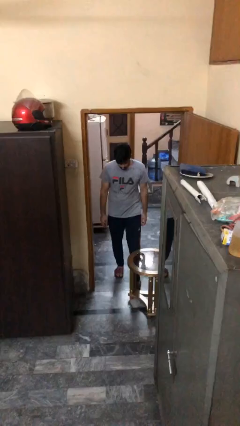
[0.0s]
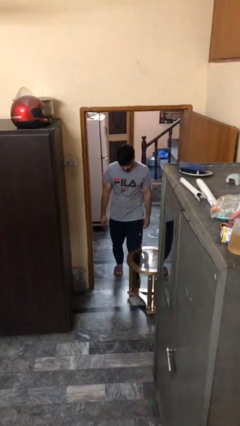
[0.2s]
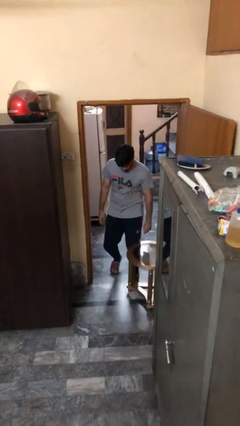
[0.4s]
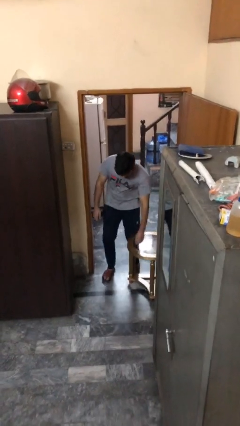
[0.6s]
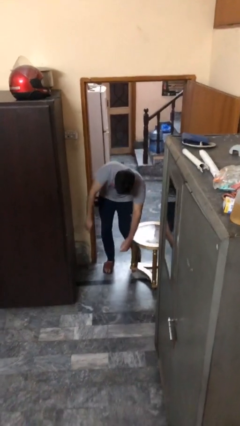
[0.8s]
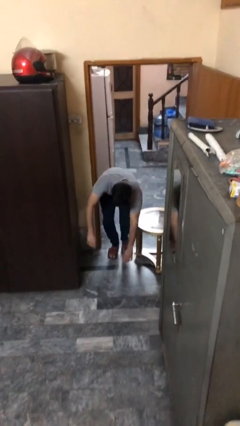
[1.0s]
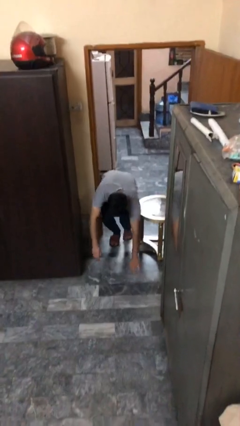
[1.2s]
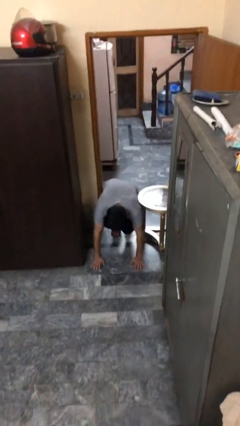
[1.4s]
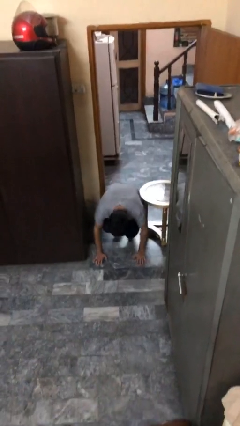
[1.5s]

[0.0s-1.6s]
person trips on object on floor

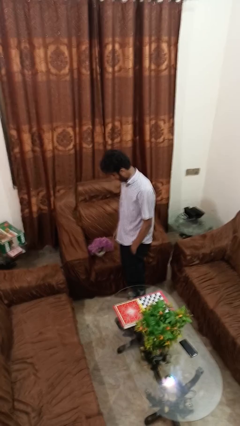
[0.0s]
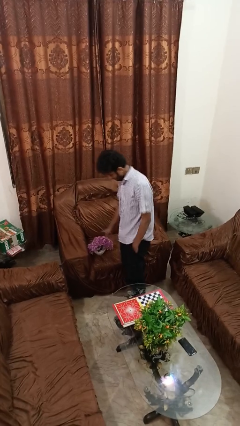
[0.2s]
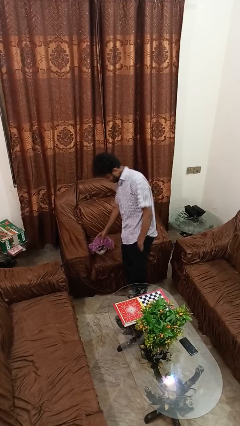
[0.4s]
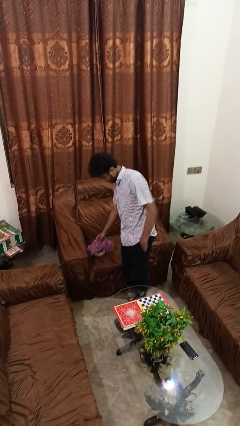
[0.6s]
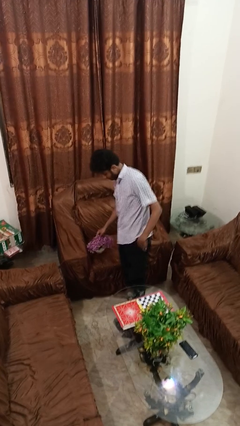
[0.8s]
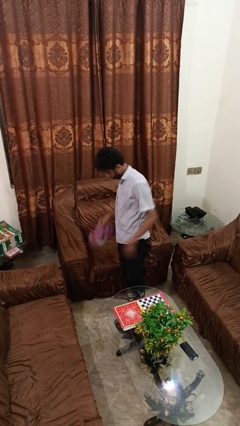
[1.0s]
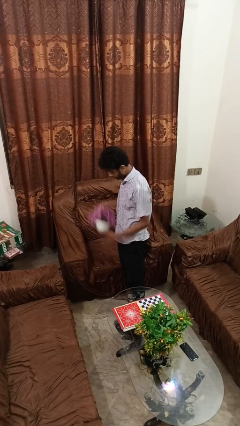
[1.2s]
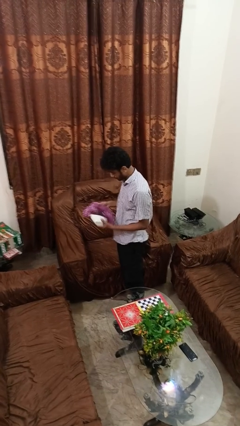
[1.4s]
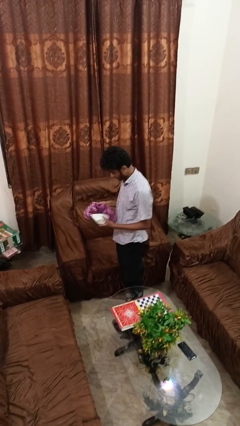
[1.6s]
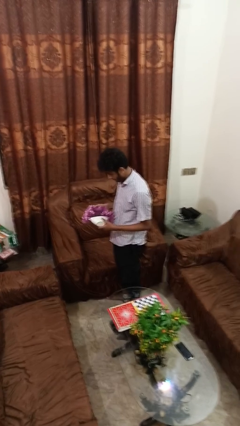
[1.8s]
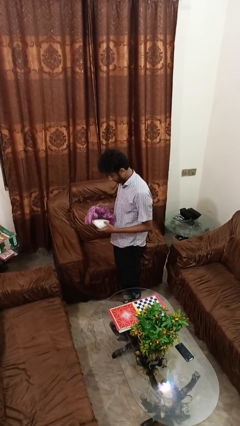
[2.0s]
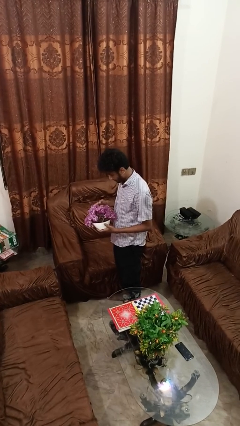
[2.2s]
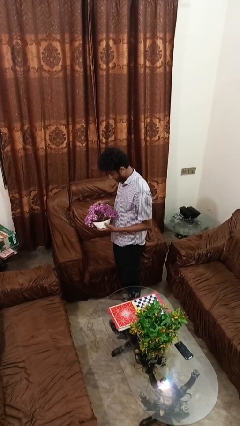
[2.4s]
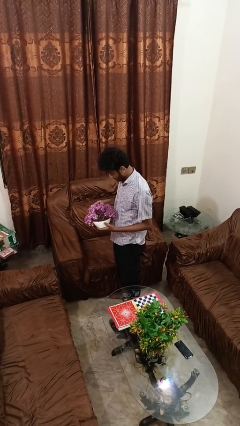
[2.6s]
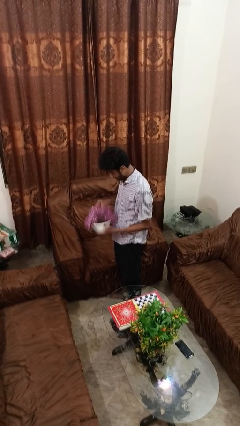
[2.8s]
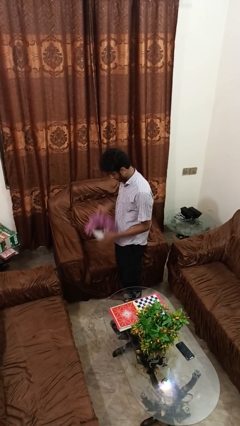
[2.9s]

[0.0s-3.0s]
person picks up object from couch

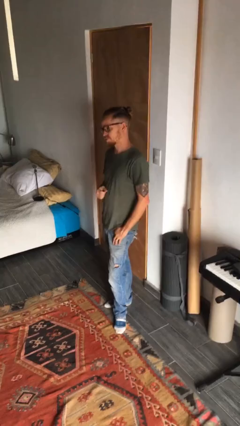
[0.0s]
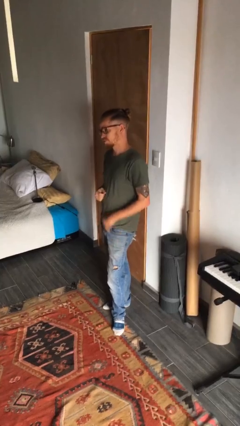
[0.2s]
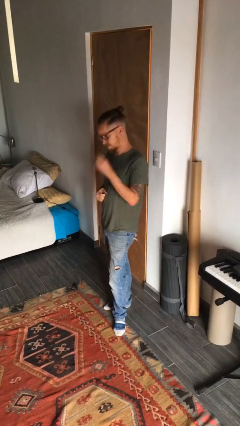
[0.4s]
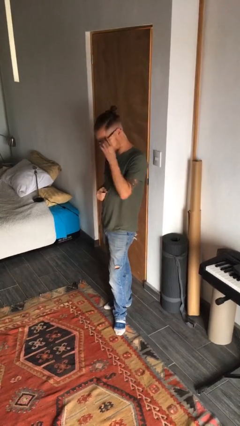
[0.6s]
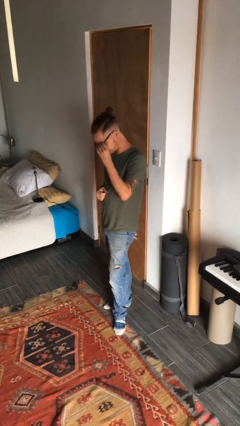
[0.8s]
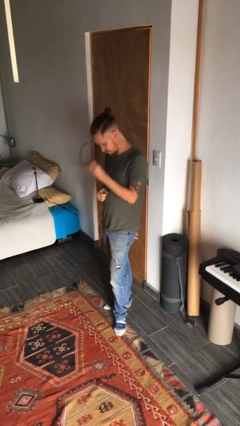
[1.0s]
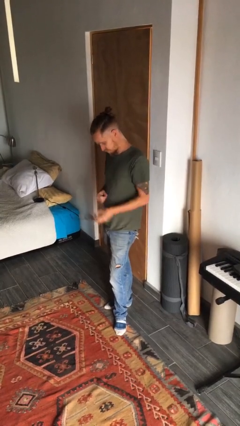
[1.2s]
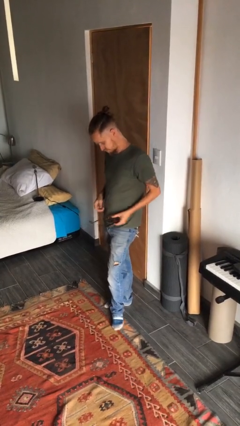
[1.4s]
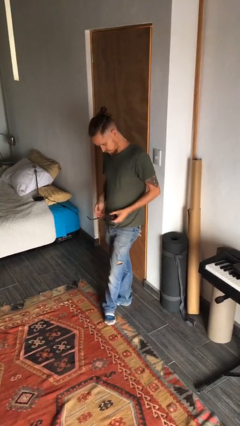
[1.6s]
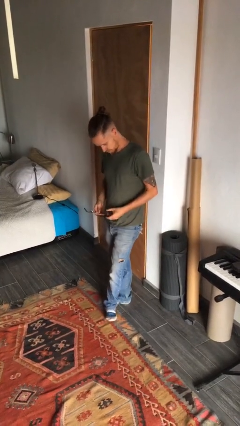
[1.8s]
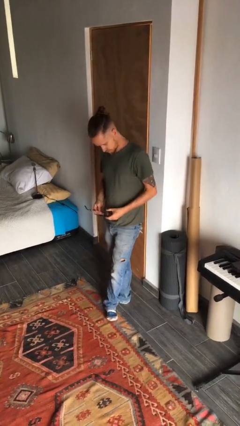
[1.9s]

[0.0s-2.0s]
person takes off glasses

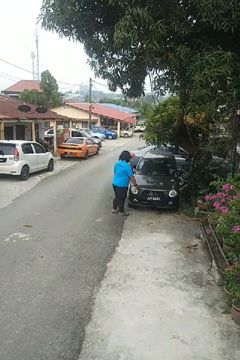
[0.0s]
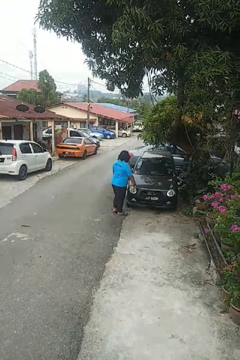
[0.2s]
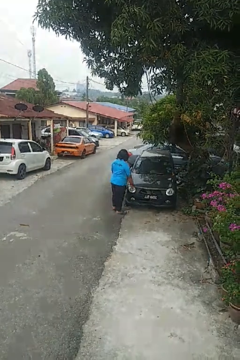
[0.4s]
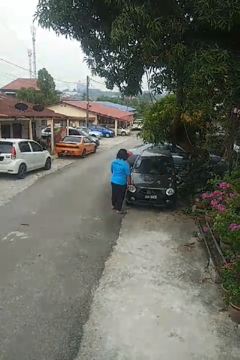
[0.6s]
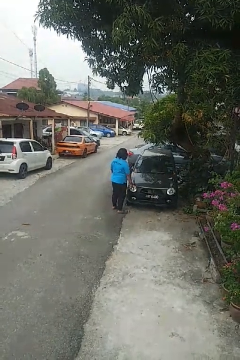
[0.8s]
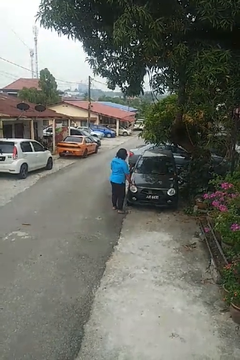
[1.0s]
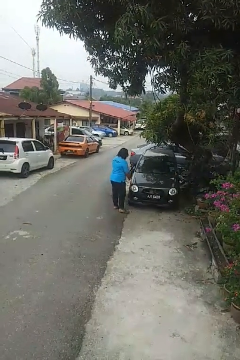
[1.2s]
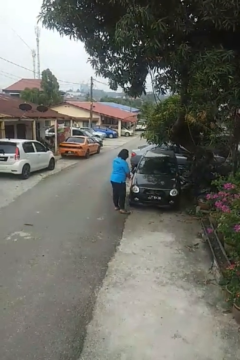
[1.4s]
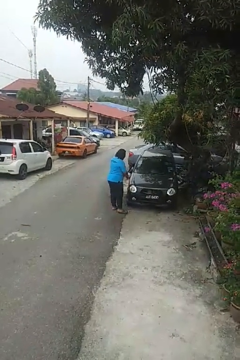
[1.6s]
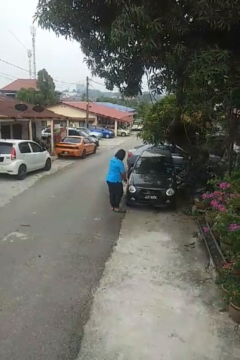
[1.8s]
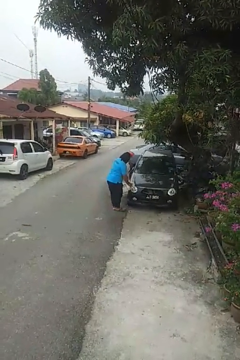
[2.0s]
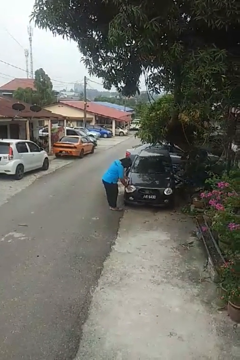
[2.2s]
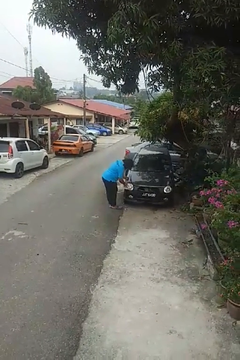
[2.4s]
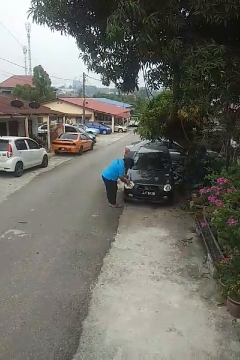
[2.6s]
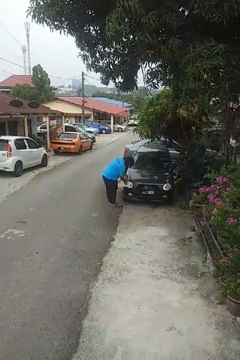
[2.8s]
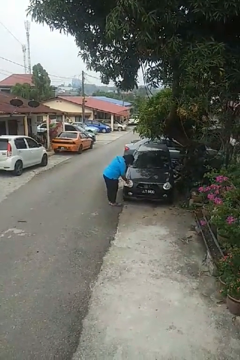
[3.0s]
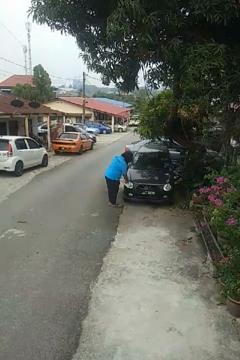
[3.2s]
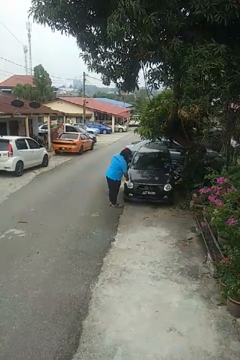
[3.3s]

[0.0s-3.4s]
person polishes car with rag

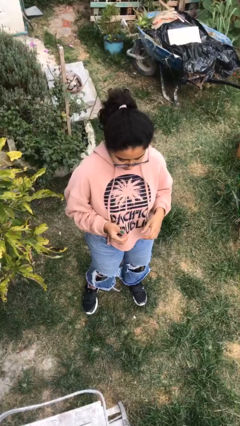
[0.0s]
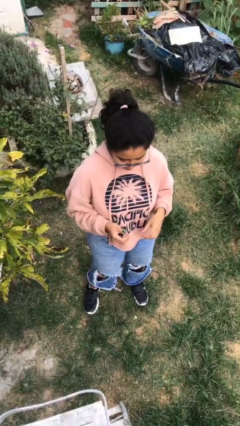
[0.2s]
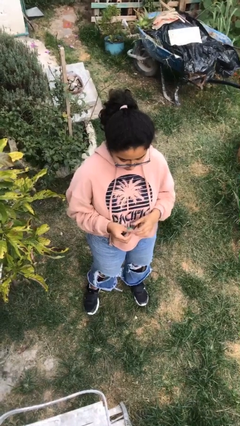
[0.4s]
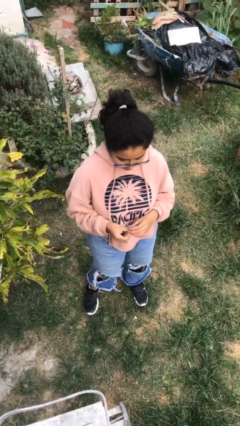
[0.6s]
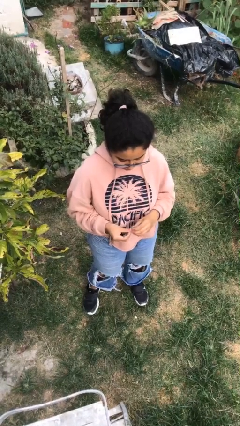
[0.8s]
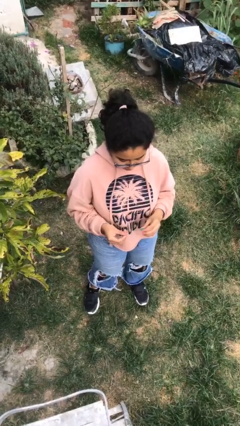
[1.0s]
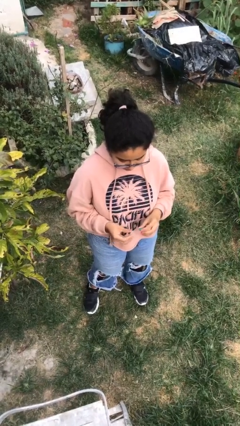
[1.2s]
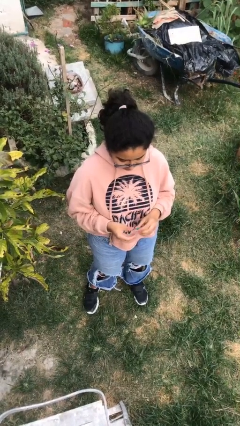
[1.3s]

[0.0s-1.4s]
person takes off ring

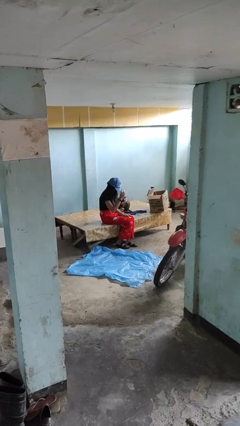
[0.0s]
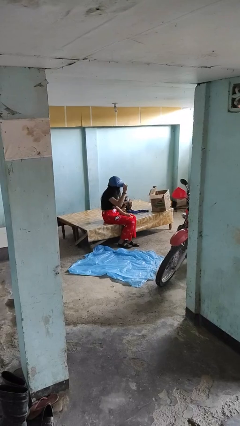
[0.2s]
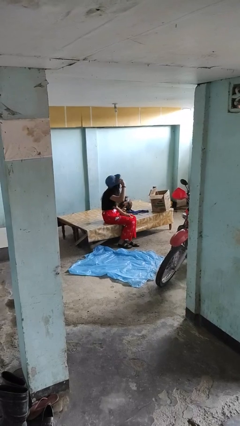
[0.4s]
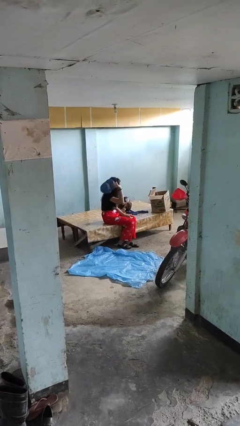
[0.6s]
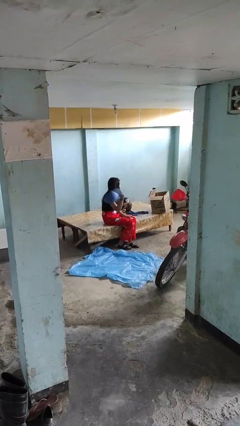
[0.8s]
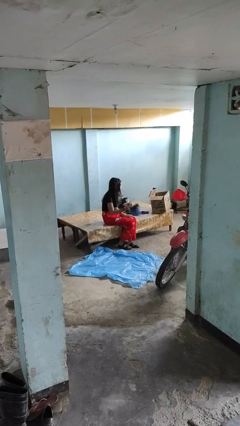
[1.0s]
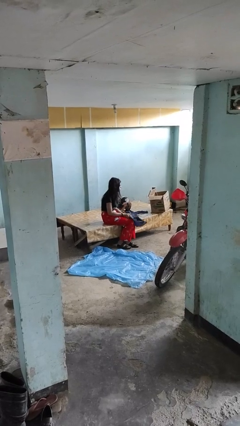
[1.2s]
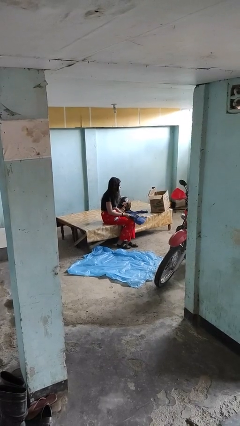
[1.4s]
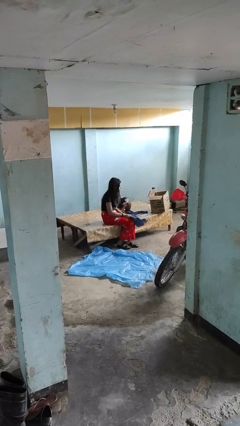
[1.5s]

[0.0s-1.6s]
person takes off hat

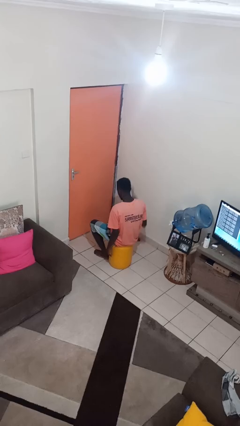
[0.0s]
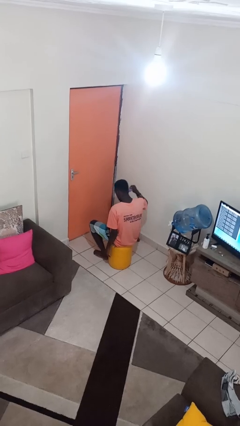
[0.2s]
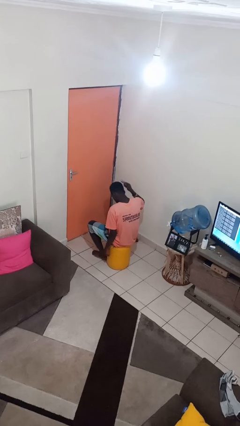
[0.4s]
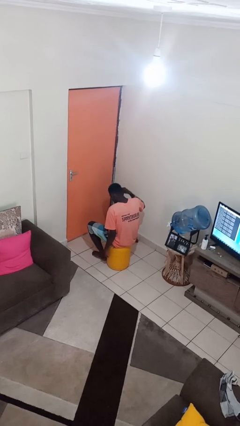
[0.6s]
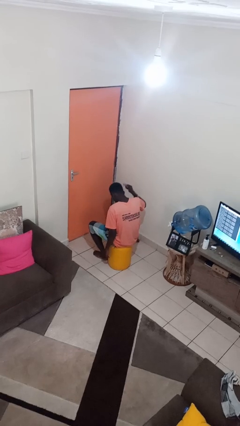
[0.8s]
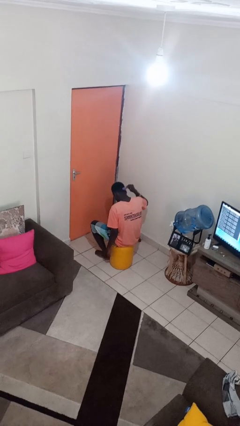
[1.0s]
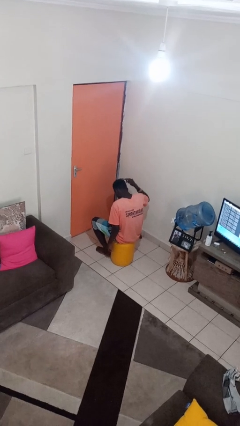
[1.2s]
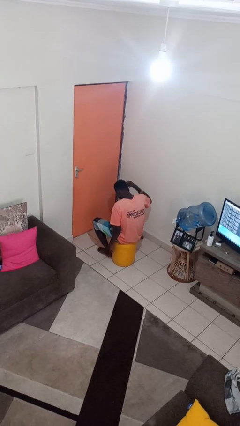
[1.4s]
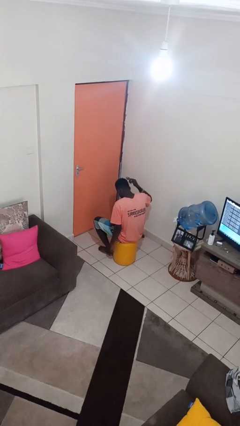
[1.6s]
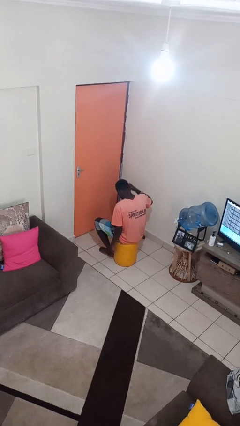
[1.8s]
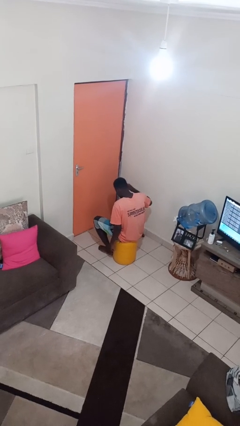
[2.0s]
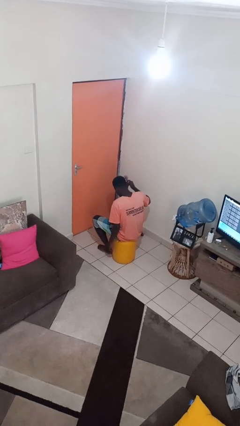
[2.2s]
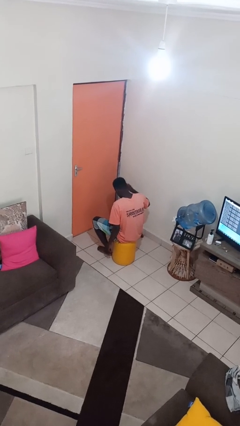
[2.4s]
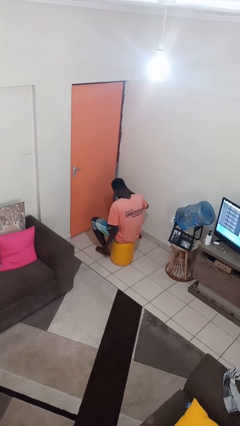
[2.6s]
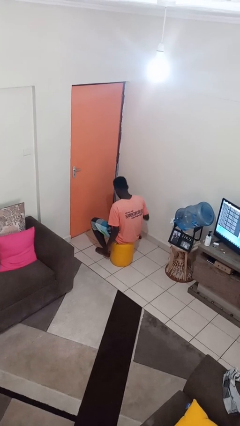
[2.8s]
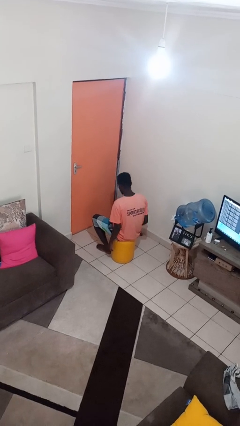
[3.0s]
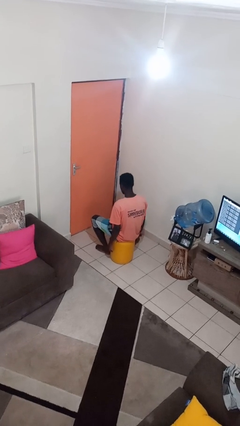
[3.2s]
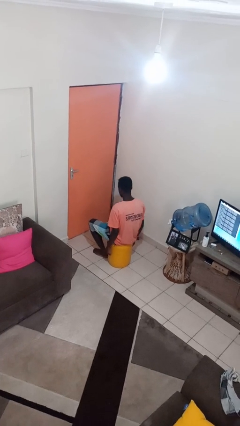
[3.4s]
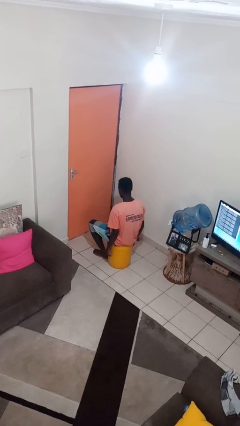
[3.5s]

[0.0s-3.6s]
person brushes hair

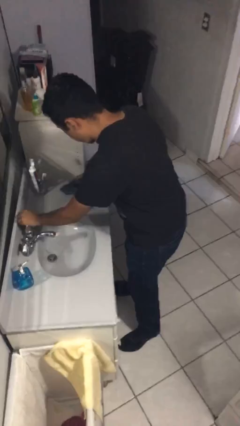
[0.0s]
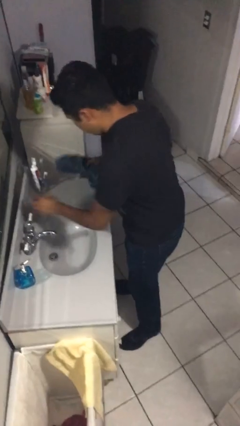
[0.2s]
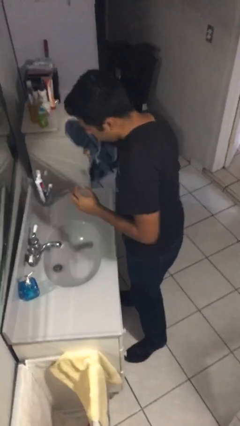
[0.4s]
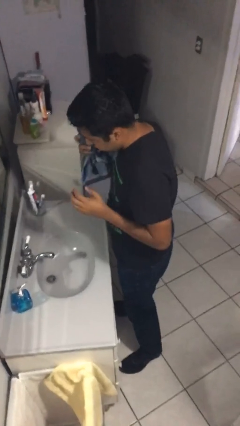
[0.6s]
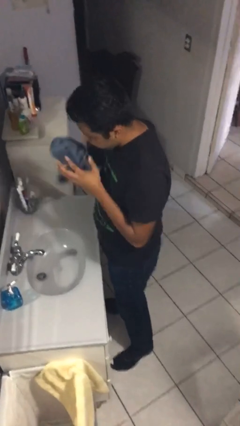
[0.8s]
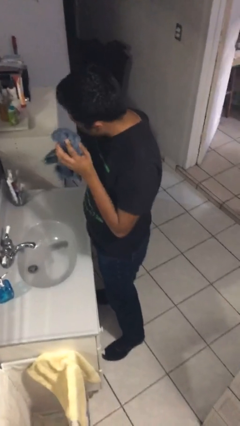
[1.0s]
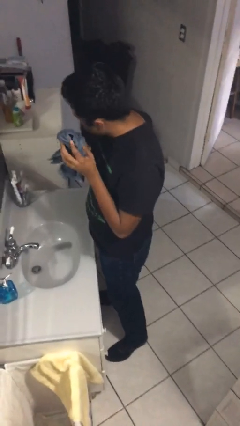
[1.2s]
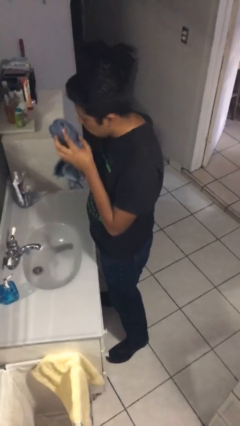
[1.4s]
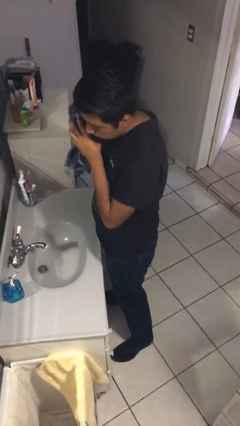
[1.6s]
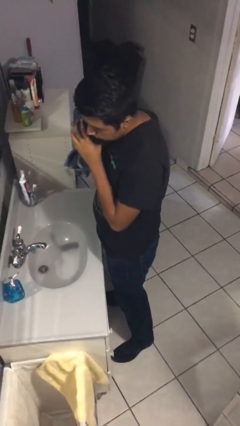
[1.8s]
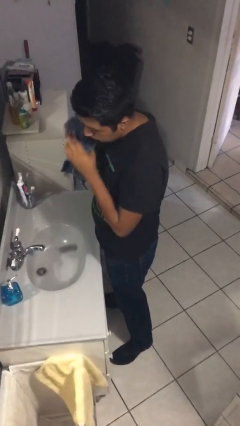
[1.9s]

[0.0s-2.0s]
person dries face with towel
